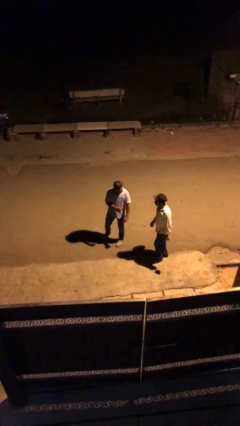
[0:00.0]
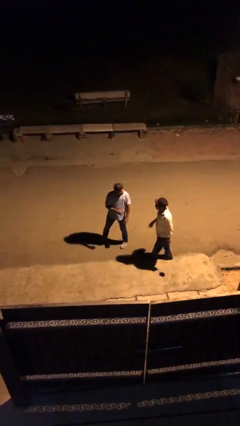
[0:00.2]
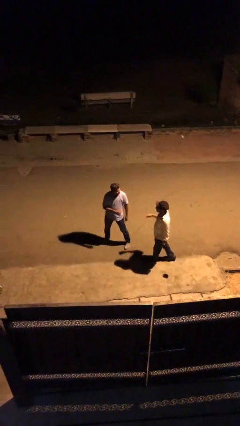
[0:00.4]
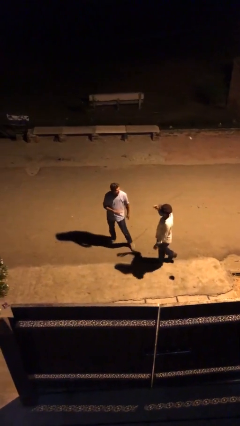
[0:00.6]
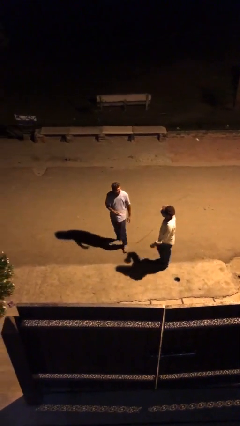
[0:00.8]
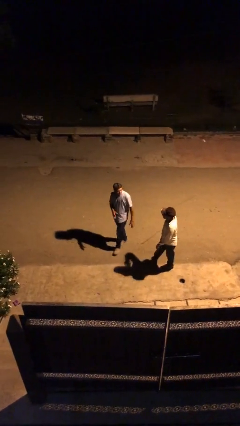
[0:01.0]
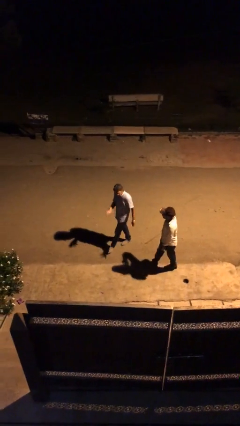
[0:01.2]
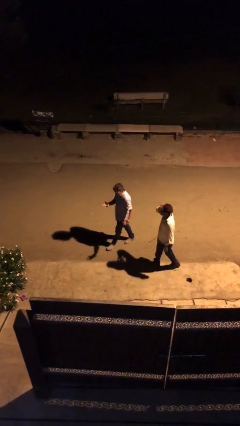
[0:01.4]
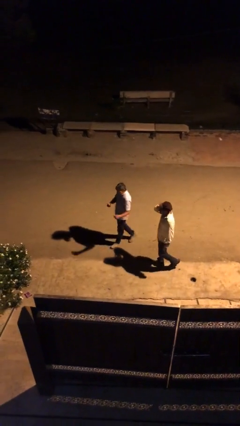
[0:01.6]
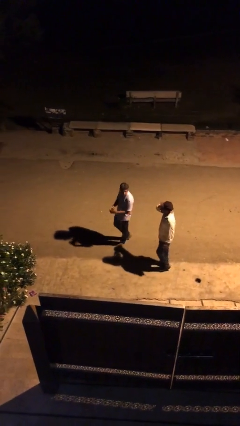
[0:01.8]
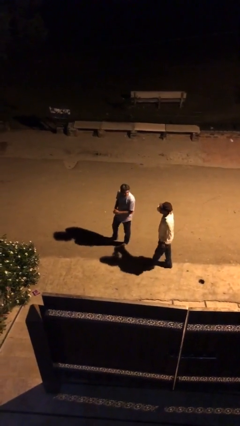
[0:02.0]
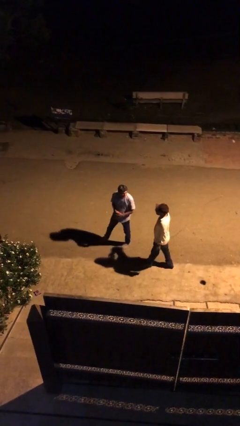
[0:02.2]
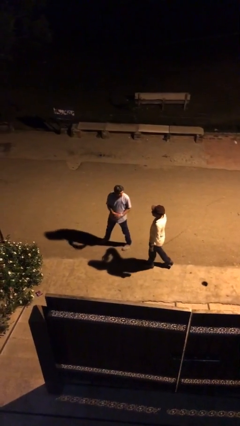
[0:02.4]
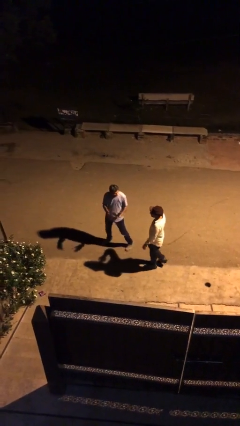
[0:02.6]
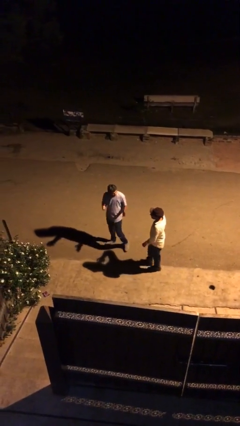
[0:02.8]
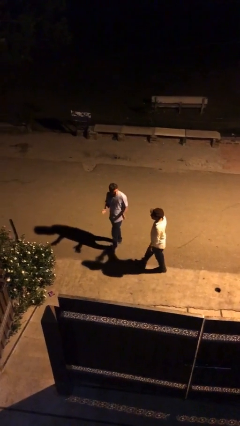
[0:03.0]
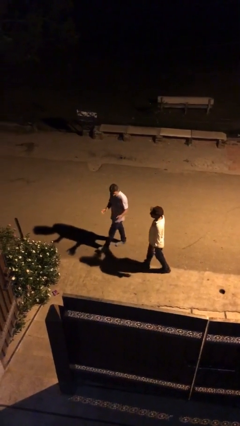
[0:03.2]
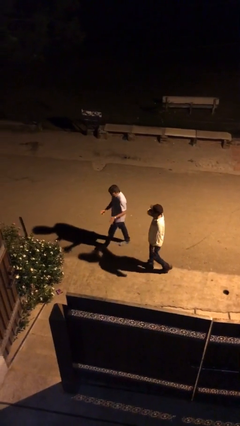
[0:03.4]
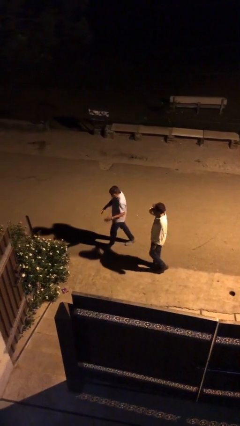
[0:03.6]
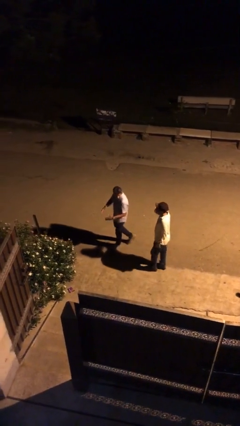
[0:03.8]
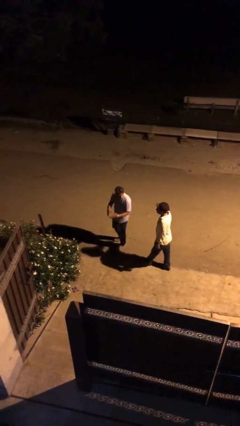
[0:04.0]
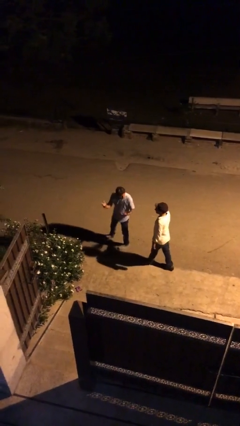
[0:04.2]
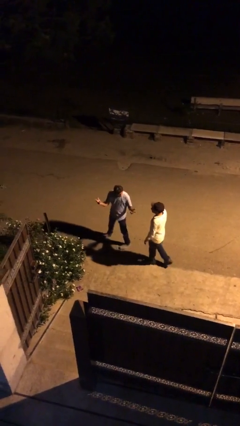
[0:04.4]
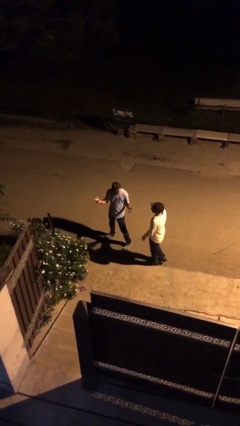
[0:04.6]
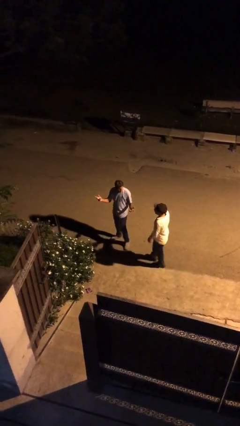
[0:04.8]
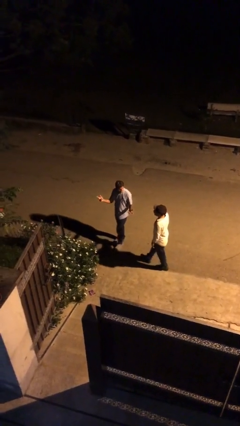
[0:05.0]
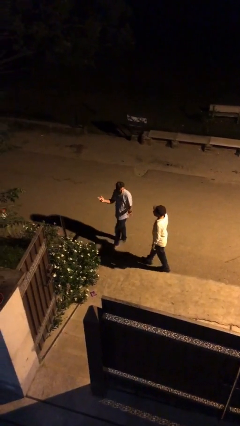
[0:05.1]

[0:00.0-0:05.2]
person talks to person

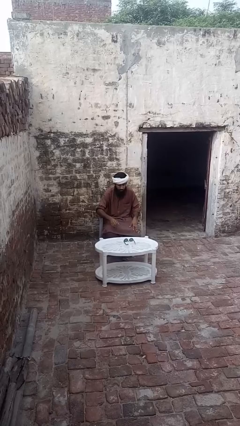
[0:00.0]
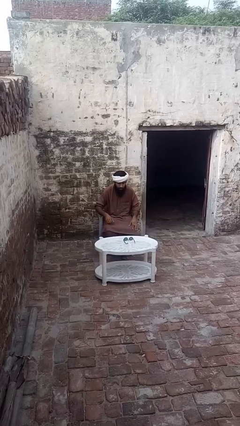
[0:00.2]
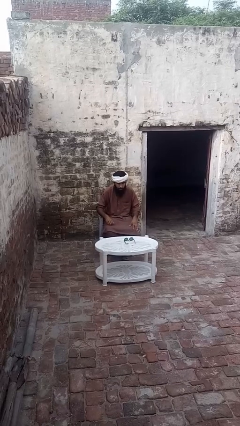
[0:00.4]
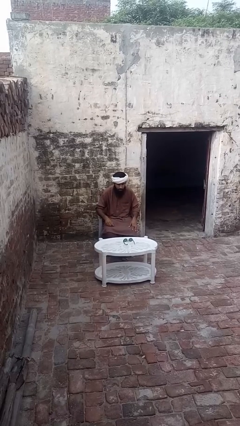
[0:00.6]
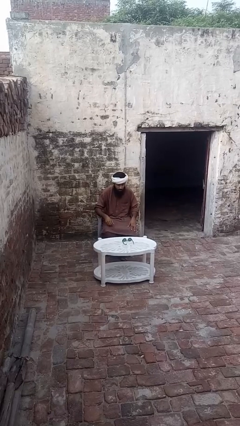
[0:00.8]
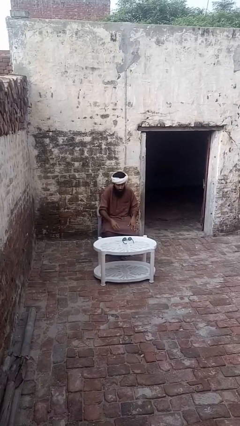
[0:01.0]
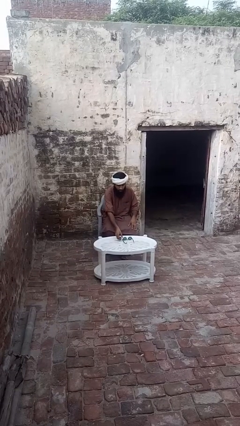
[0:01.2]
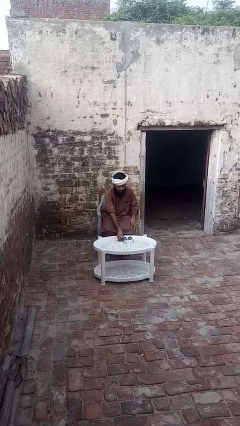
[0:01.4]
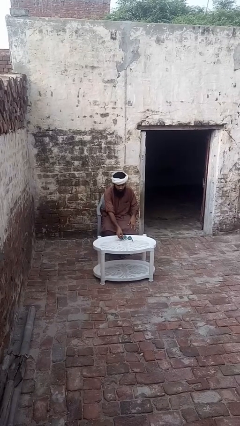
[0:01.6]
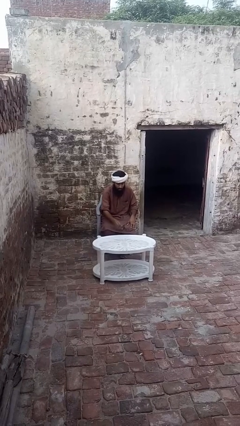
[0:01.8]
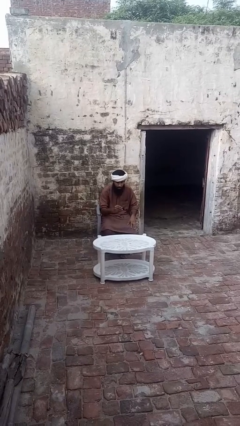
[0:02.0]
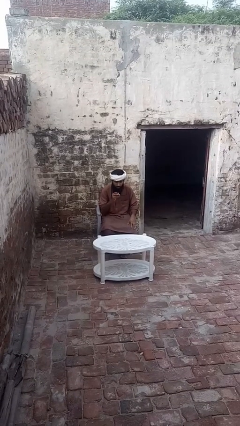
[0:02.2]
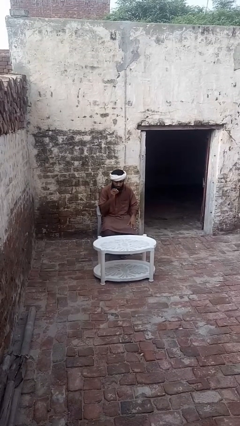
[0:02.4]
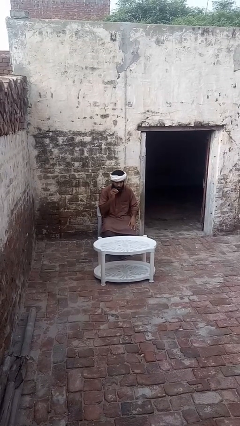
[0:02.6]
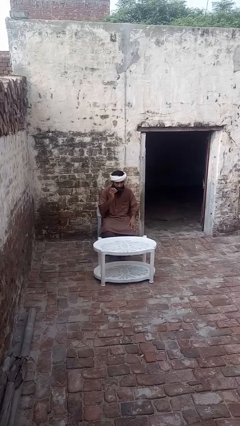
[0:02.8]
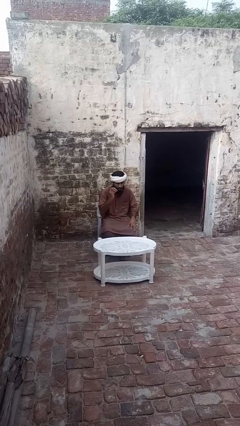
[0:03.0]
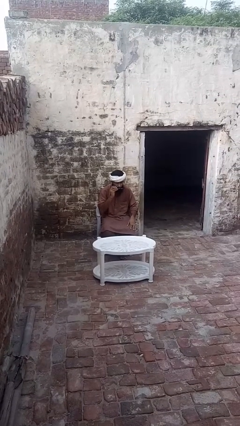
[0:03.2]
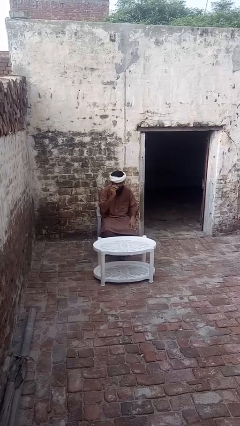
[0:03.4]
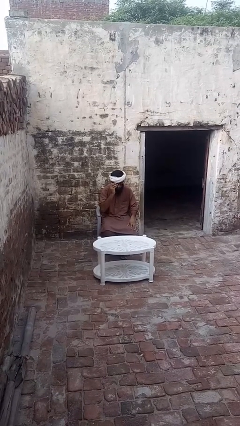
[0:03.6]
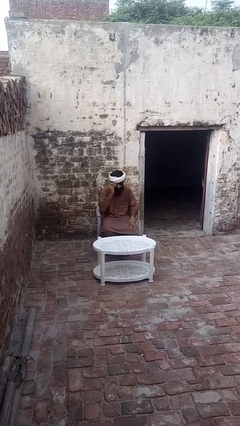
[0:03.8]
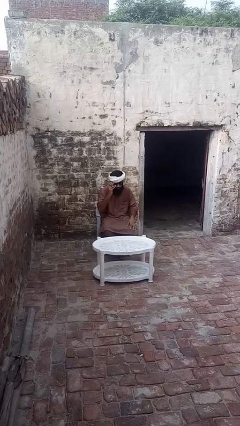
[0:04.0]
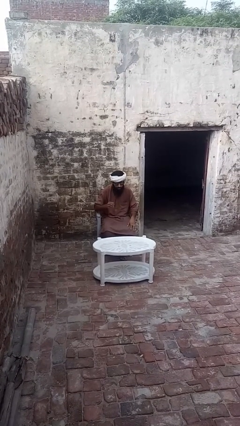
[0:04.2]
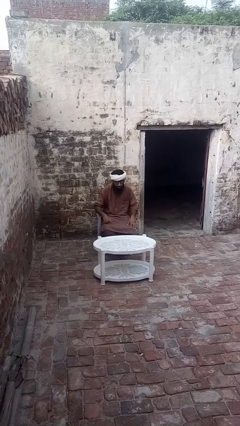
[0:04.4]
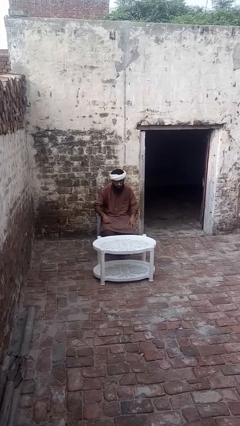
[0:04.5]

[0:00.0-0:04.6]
person puts on sunglasses

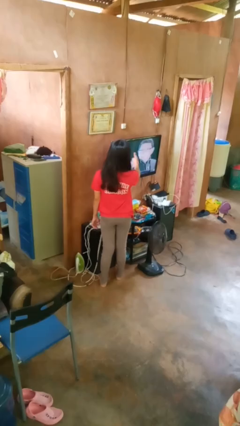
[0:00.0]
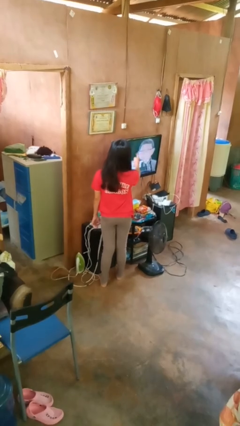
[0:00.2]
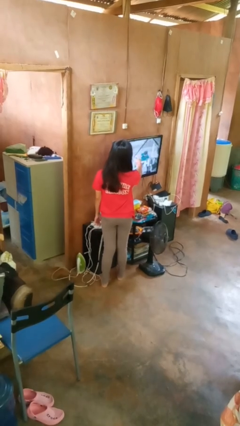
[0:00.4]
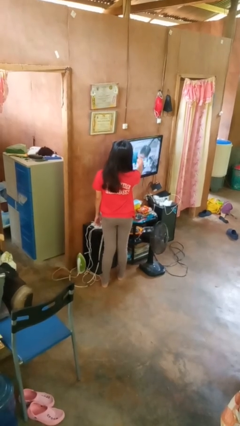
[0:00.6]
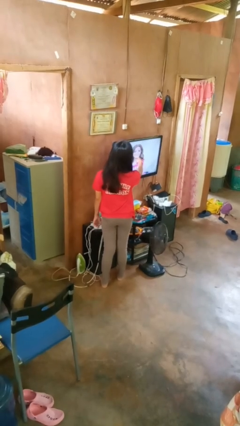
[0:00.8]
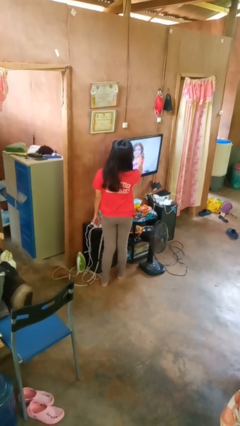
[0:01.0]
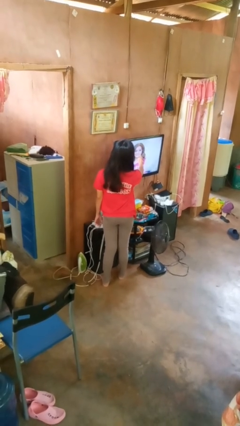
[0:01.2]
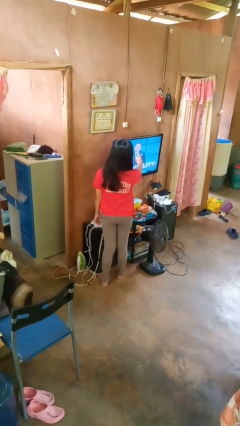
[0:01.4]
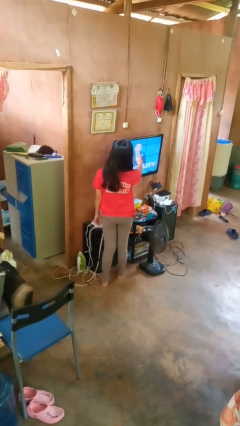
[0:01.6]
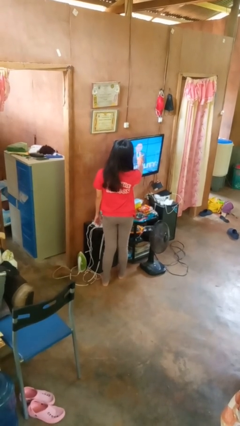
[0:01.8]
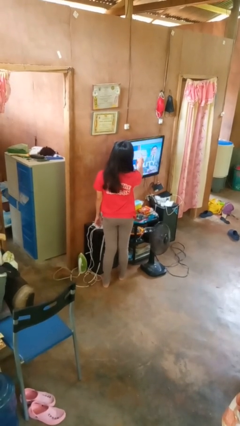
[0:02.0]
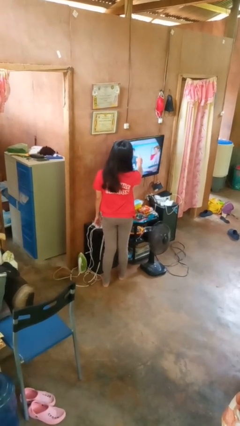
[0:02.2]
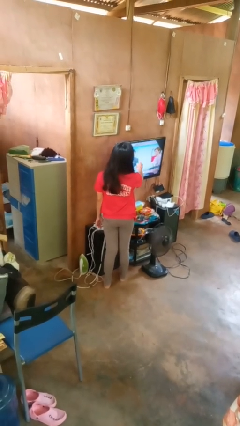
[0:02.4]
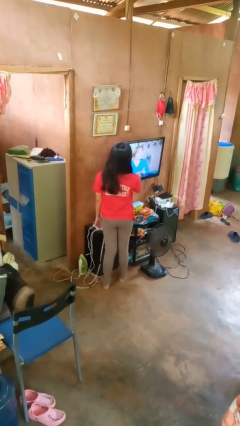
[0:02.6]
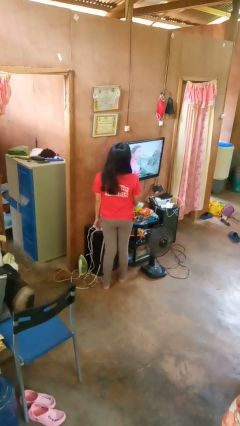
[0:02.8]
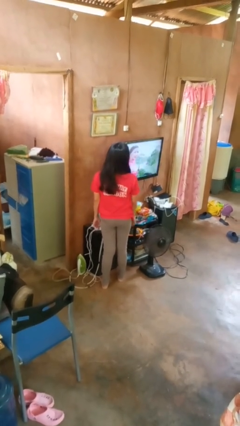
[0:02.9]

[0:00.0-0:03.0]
person taps object with finger

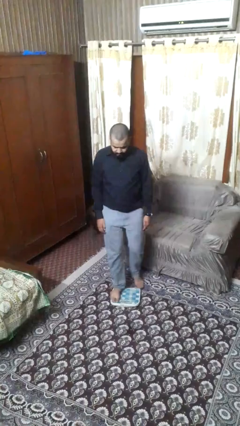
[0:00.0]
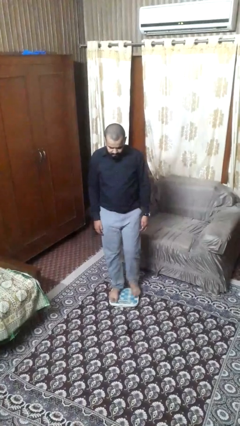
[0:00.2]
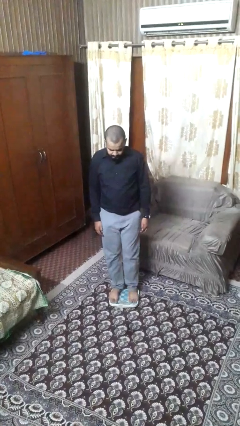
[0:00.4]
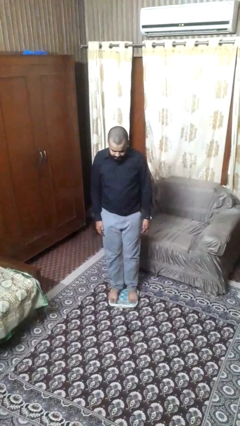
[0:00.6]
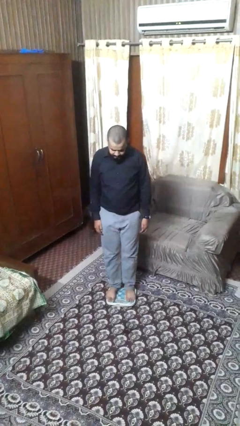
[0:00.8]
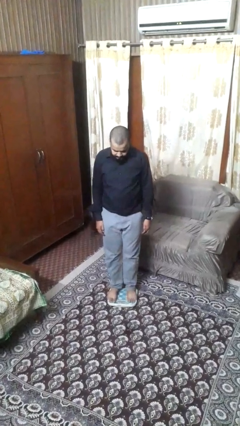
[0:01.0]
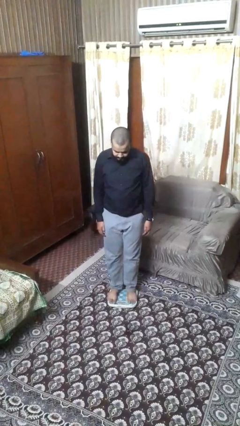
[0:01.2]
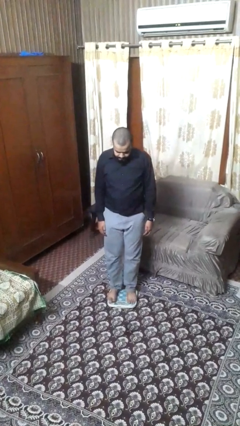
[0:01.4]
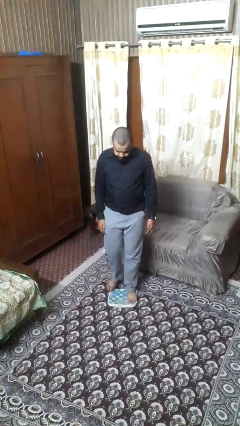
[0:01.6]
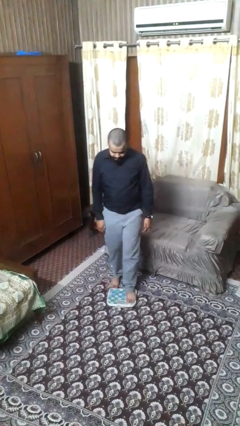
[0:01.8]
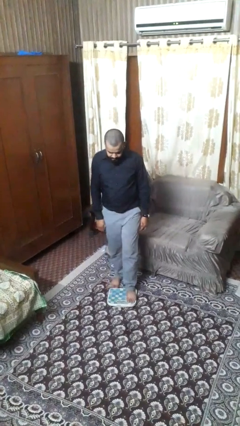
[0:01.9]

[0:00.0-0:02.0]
person uses bodyweight scale

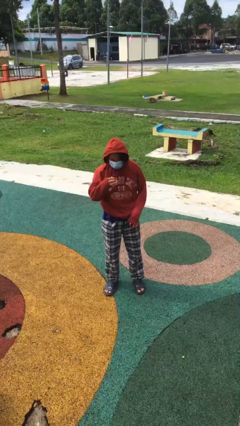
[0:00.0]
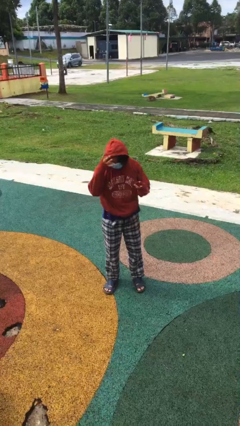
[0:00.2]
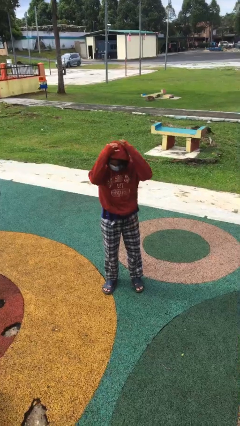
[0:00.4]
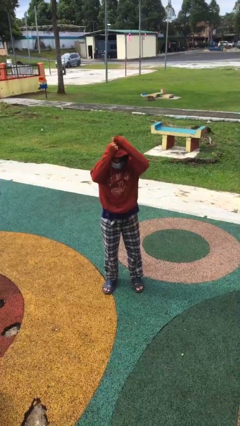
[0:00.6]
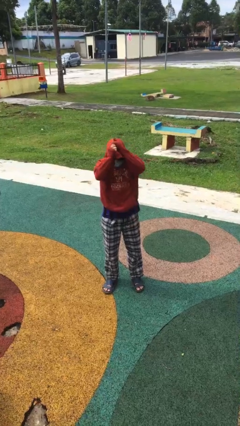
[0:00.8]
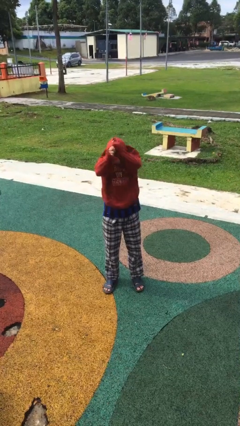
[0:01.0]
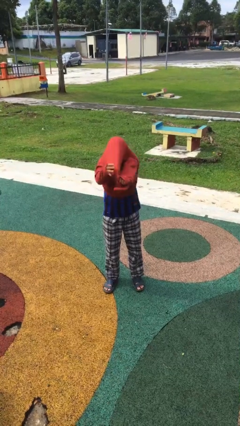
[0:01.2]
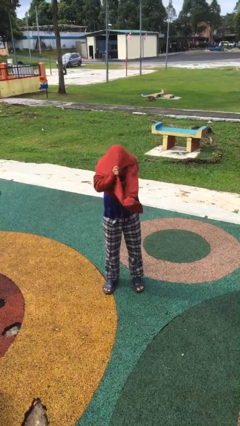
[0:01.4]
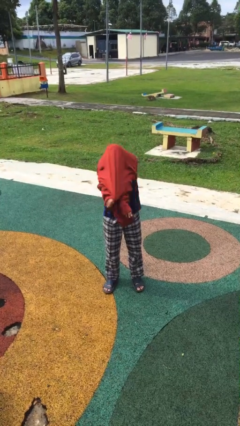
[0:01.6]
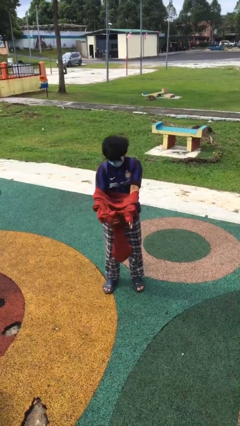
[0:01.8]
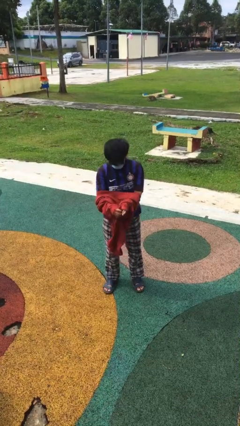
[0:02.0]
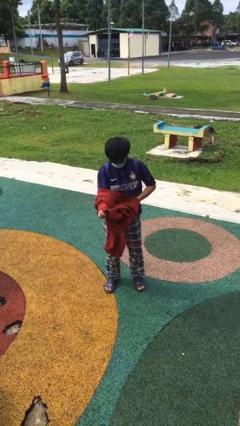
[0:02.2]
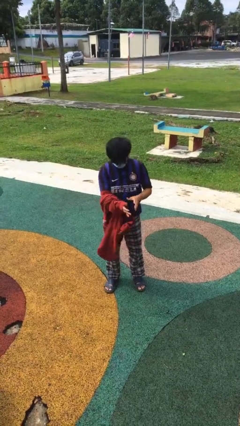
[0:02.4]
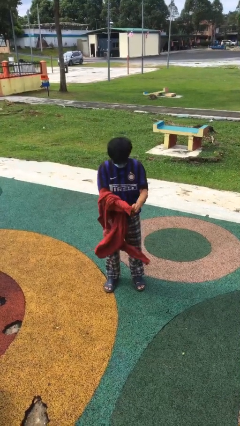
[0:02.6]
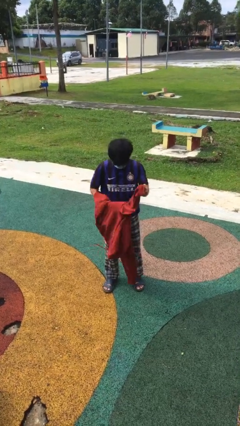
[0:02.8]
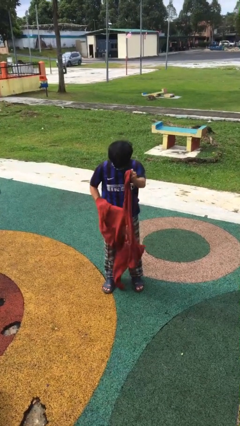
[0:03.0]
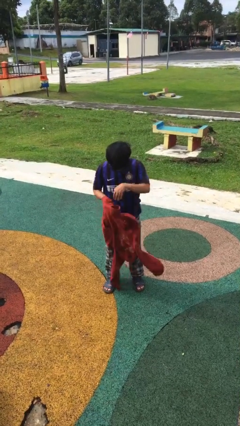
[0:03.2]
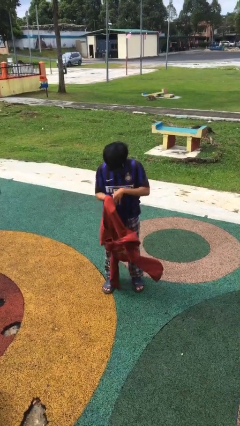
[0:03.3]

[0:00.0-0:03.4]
person takes off hoodie
